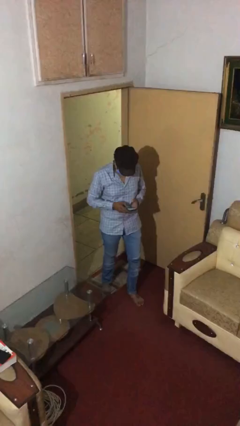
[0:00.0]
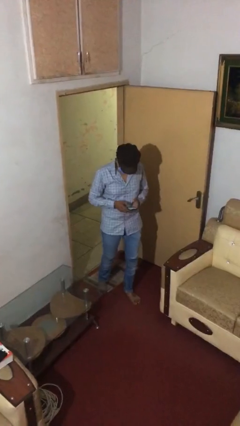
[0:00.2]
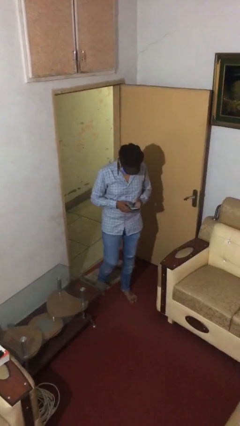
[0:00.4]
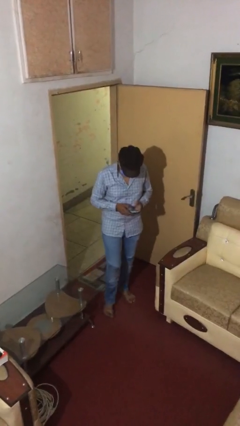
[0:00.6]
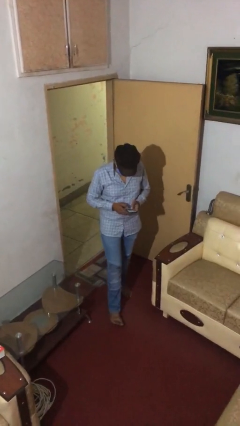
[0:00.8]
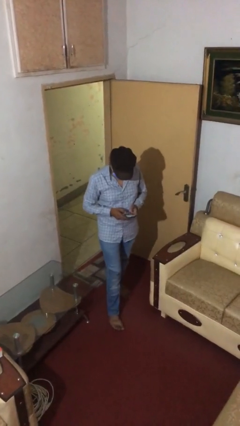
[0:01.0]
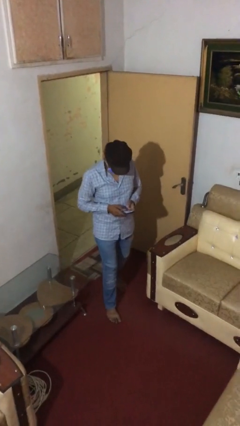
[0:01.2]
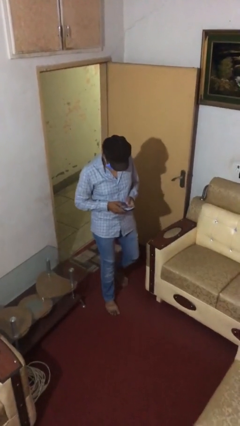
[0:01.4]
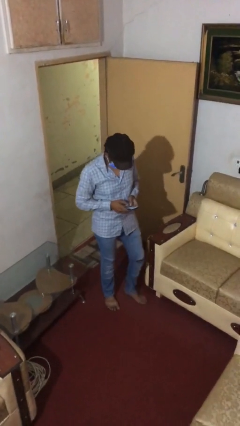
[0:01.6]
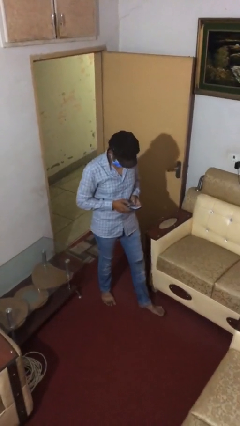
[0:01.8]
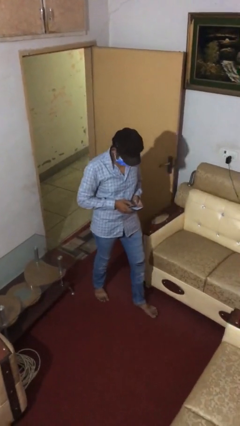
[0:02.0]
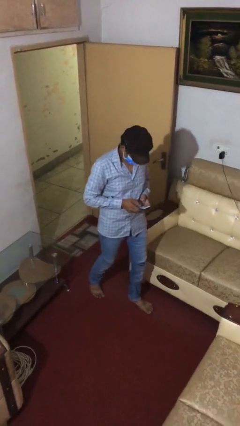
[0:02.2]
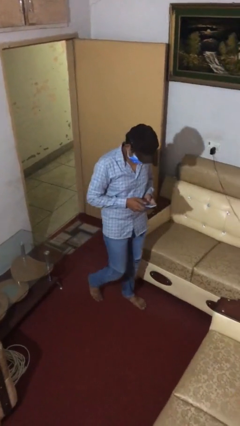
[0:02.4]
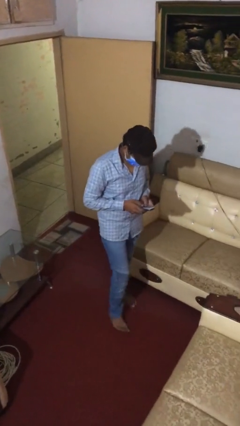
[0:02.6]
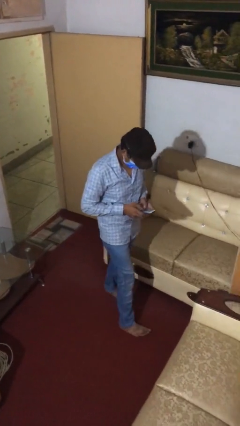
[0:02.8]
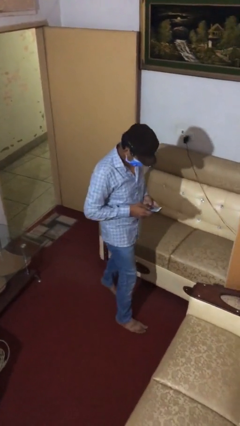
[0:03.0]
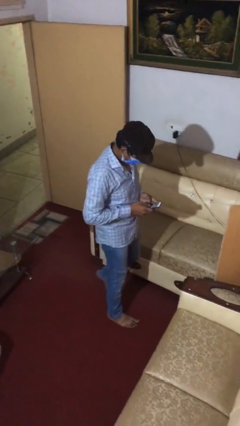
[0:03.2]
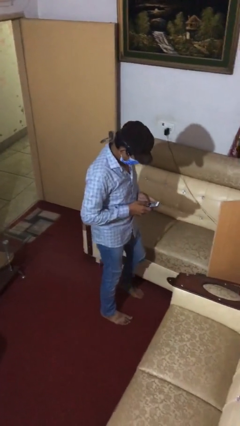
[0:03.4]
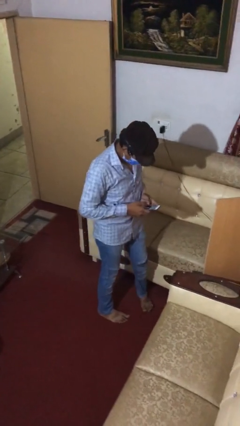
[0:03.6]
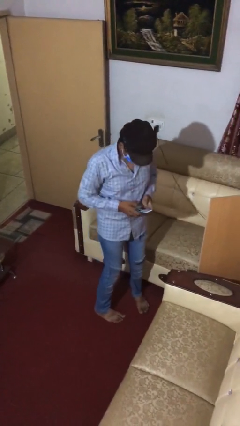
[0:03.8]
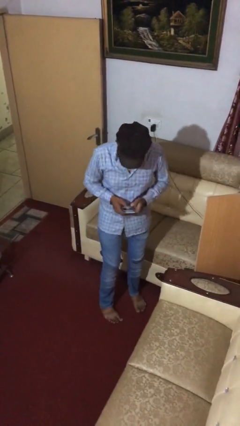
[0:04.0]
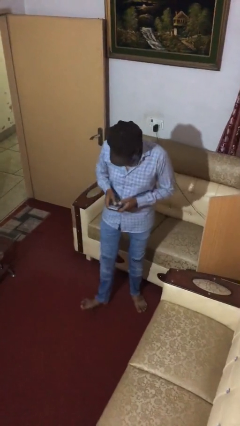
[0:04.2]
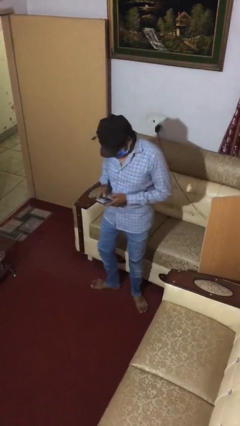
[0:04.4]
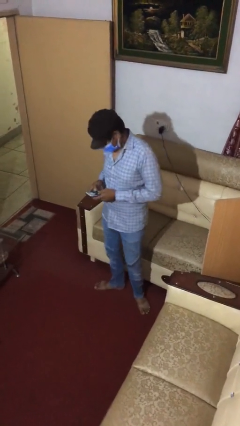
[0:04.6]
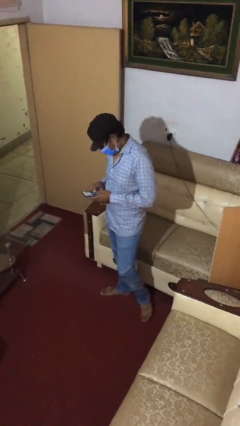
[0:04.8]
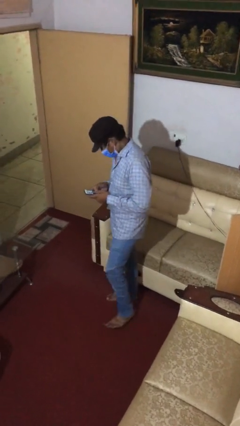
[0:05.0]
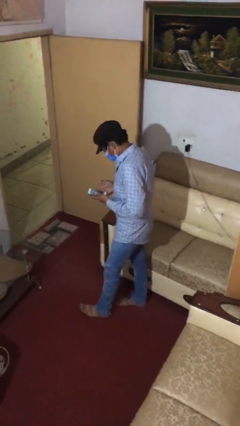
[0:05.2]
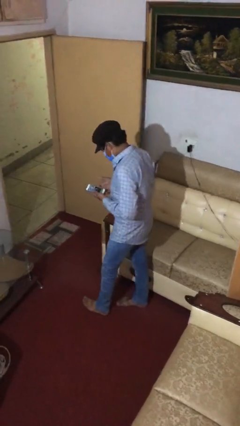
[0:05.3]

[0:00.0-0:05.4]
person texts on phone

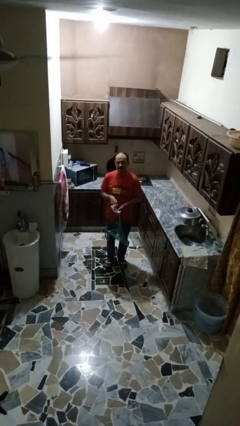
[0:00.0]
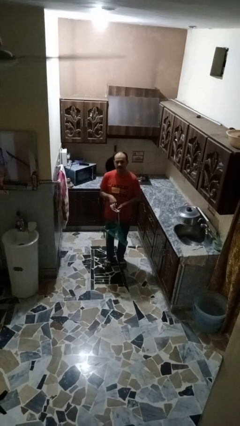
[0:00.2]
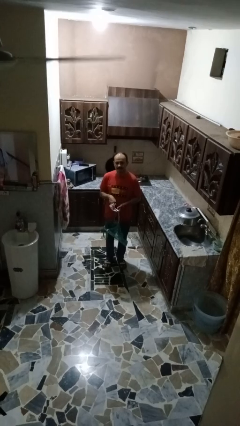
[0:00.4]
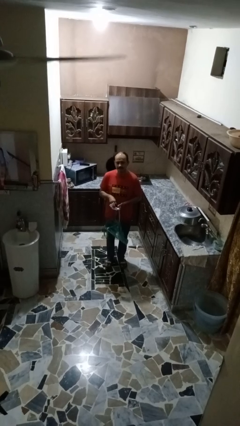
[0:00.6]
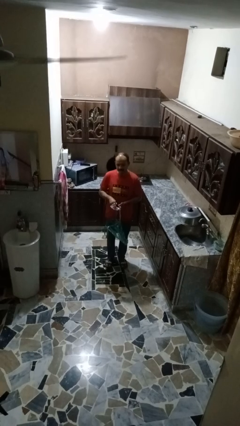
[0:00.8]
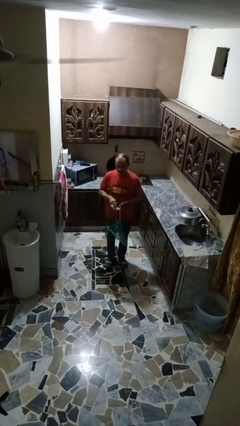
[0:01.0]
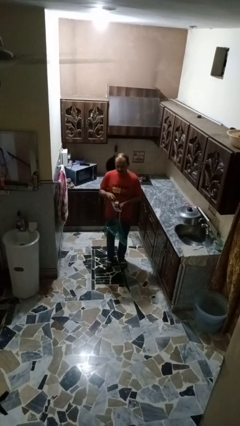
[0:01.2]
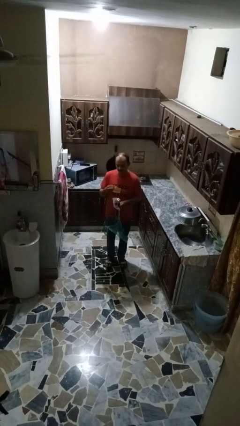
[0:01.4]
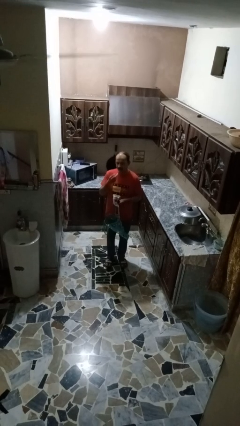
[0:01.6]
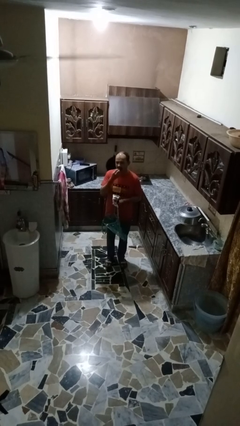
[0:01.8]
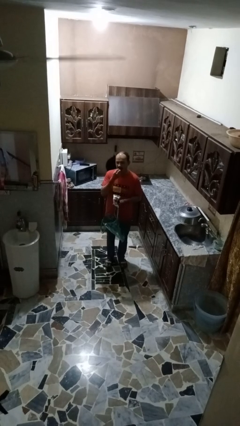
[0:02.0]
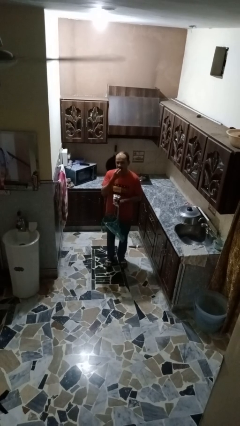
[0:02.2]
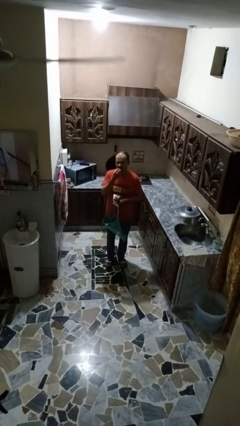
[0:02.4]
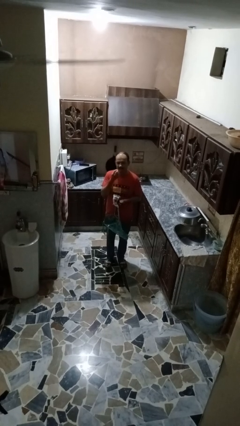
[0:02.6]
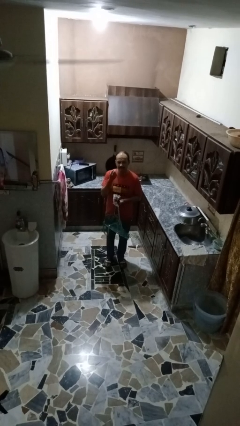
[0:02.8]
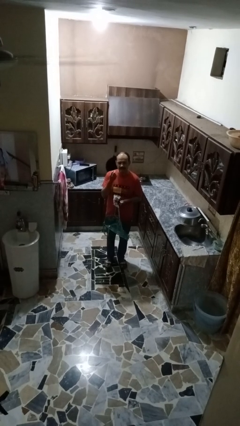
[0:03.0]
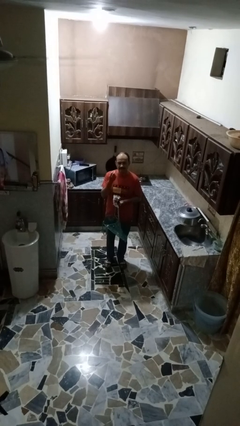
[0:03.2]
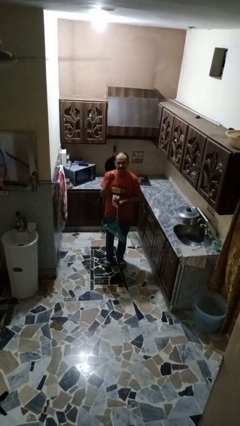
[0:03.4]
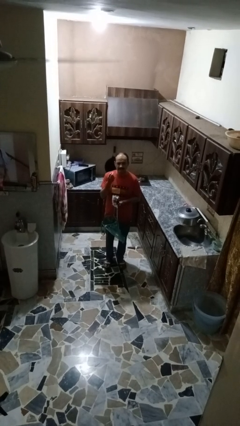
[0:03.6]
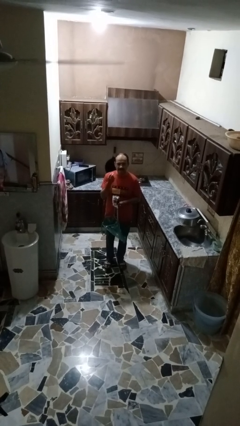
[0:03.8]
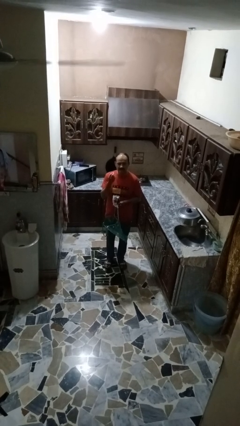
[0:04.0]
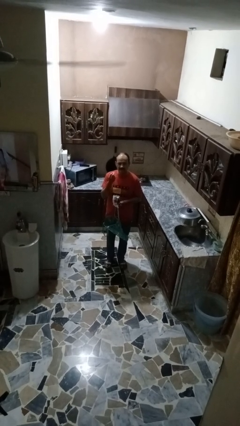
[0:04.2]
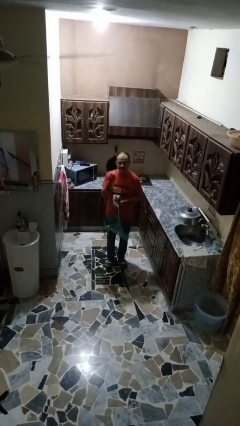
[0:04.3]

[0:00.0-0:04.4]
person eats snack from bag

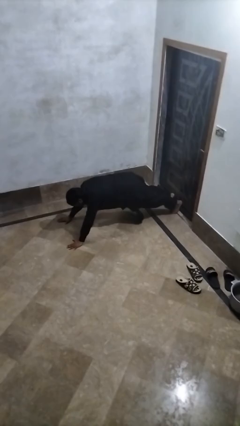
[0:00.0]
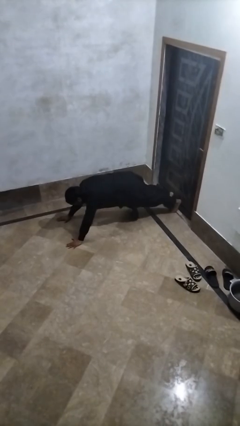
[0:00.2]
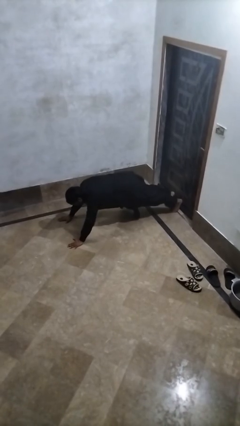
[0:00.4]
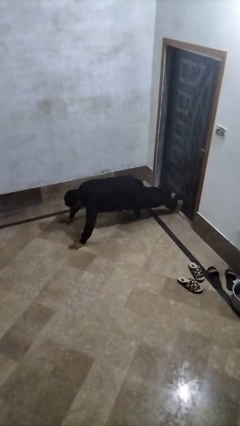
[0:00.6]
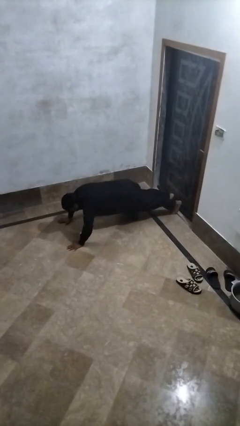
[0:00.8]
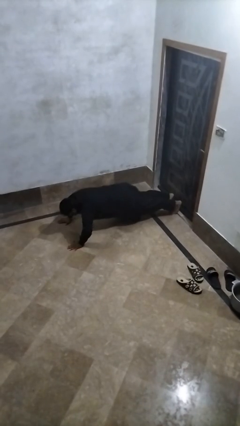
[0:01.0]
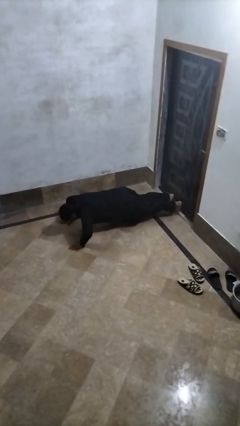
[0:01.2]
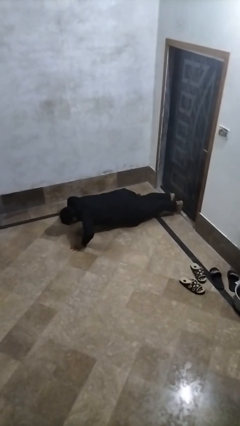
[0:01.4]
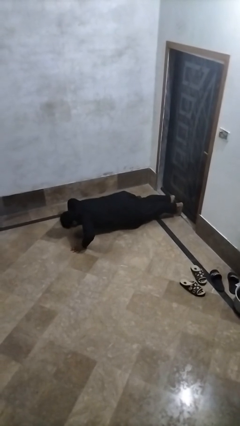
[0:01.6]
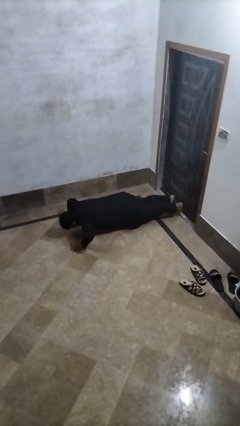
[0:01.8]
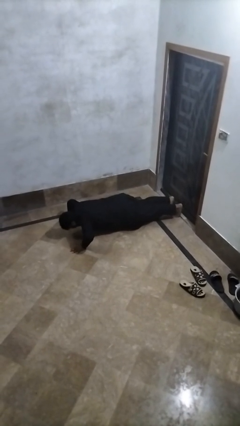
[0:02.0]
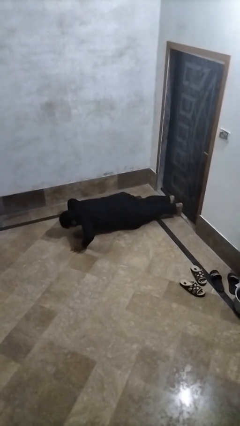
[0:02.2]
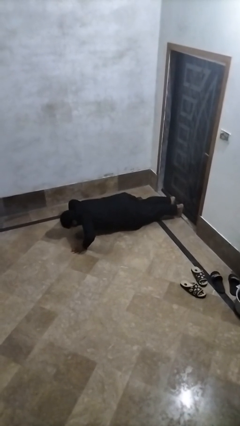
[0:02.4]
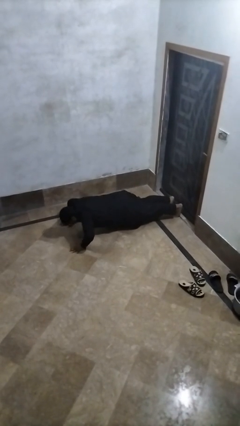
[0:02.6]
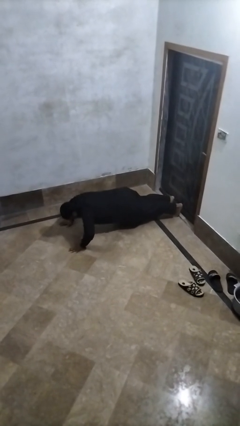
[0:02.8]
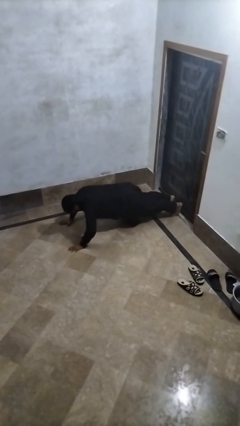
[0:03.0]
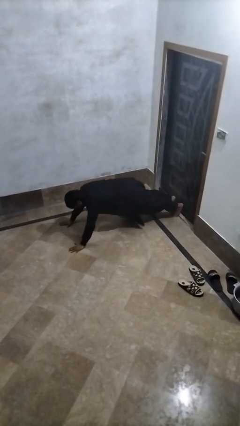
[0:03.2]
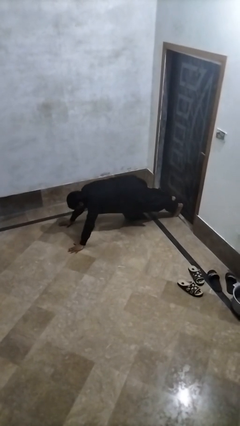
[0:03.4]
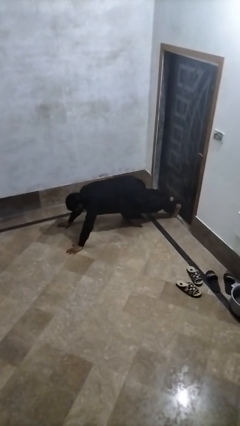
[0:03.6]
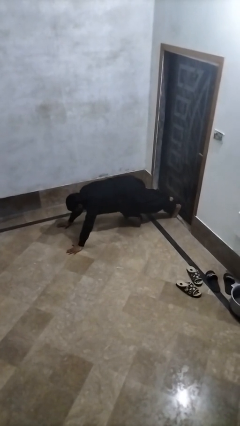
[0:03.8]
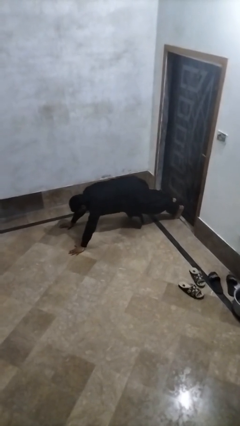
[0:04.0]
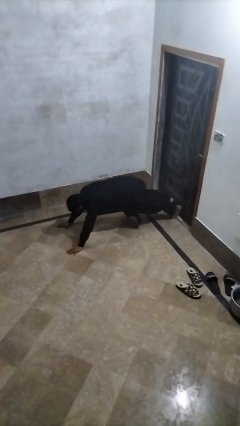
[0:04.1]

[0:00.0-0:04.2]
person exercises with pushup

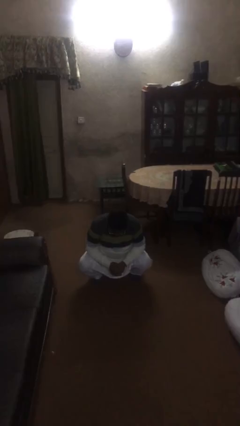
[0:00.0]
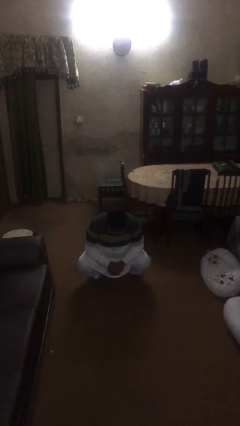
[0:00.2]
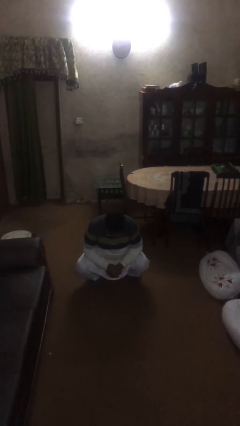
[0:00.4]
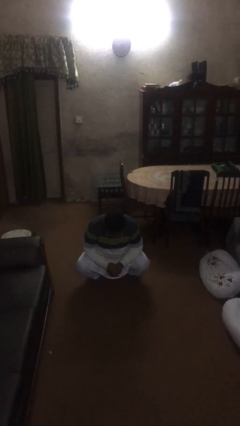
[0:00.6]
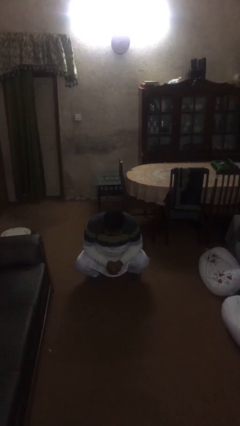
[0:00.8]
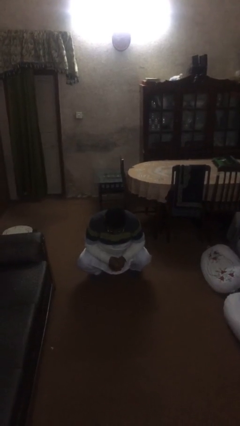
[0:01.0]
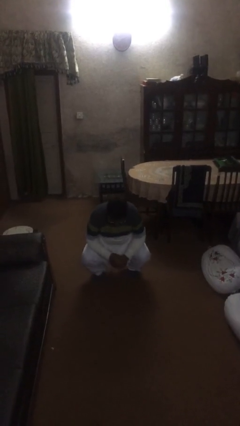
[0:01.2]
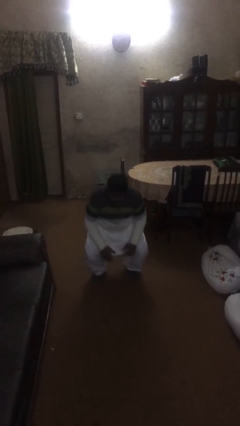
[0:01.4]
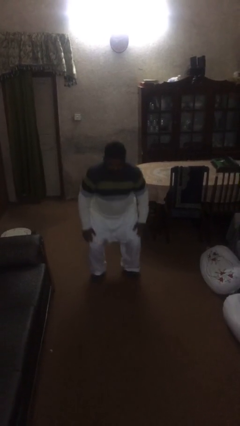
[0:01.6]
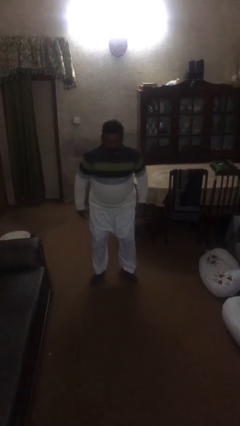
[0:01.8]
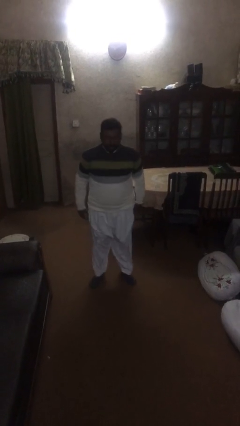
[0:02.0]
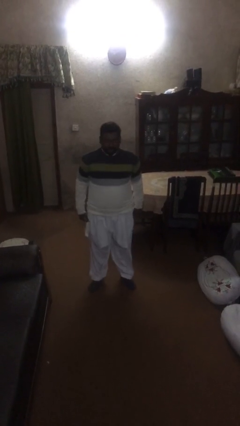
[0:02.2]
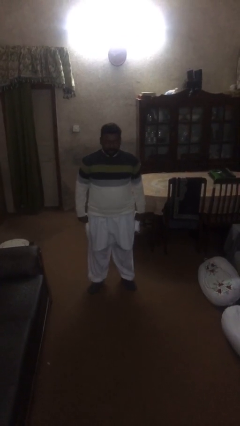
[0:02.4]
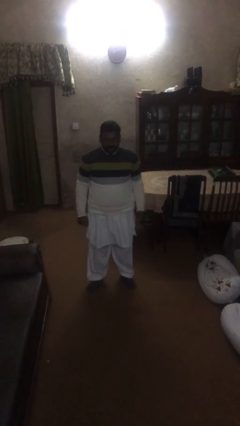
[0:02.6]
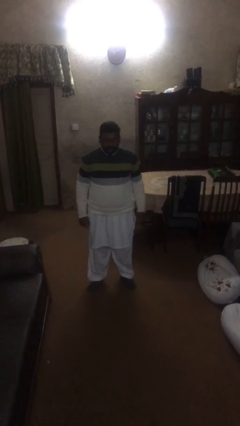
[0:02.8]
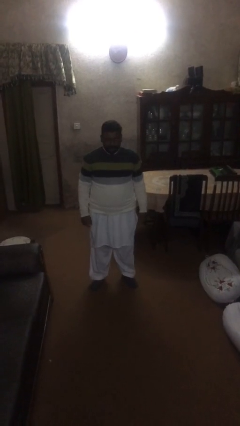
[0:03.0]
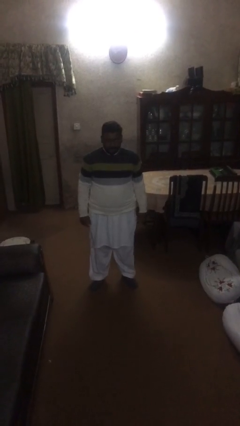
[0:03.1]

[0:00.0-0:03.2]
person stands up

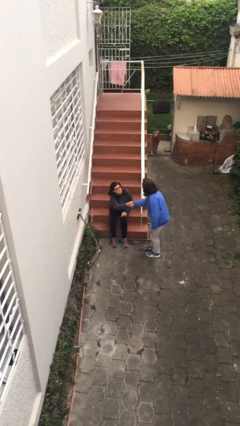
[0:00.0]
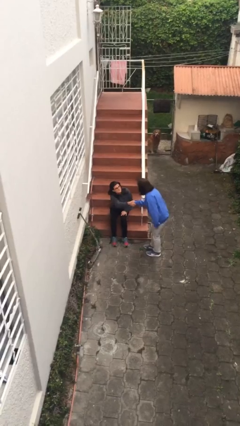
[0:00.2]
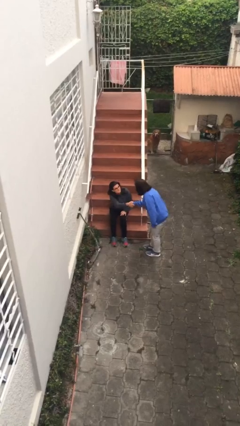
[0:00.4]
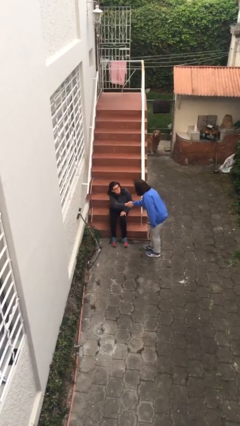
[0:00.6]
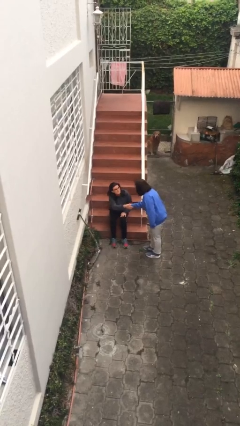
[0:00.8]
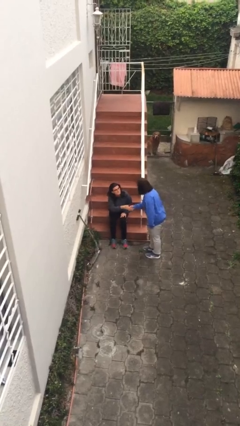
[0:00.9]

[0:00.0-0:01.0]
person shakes hand
